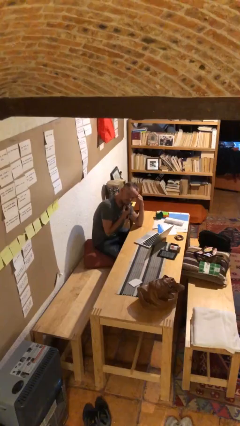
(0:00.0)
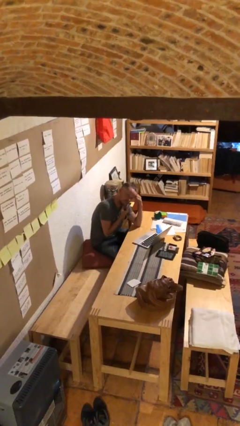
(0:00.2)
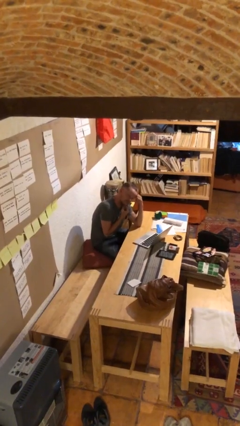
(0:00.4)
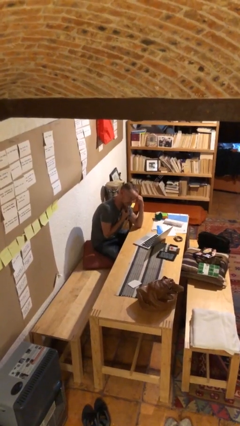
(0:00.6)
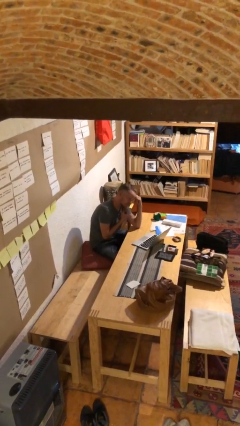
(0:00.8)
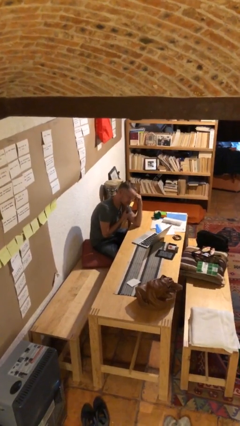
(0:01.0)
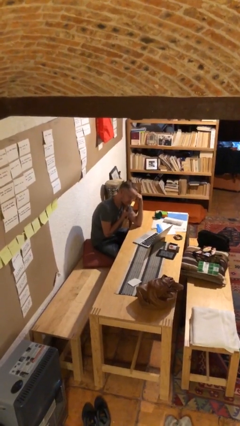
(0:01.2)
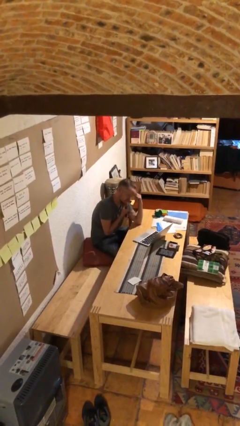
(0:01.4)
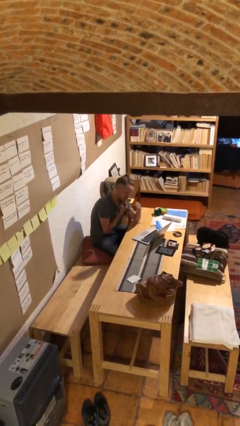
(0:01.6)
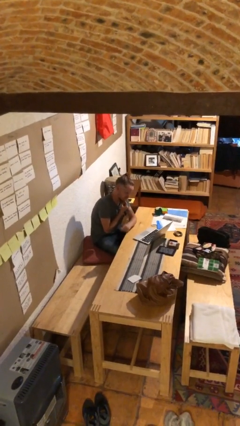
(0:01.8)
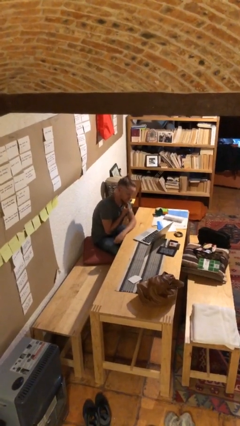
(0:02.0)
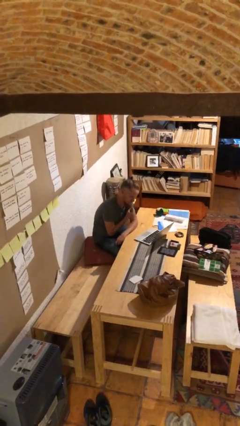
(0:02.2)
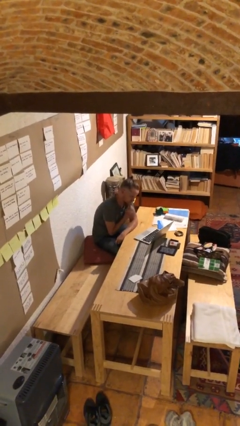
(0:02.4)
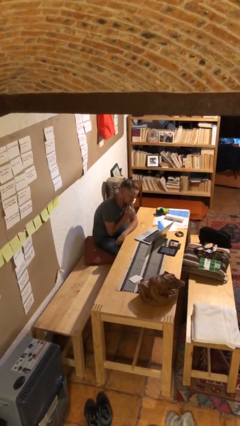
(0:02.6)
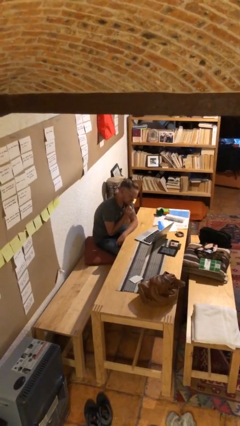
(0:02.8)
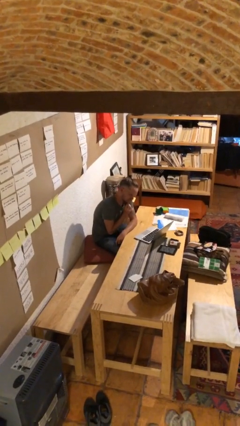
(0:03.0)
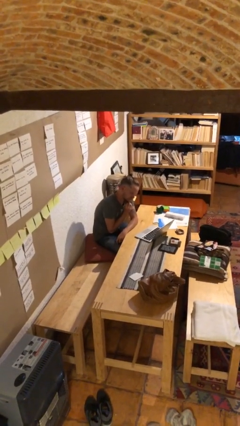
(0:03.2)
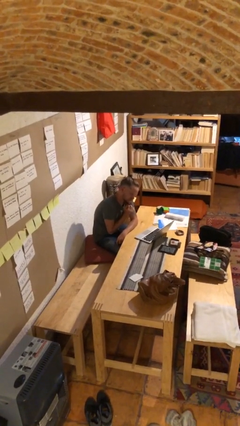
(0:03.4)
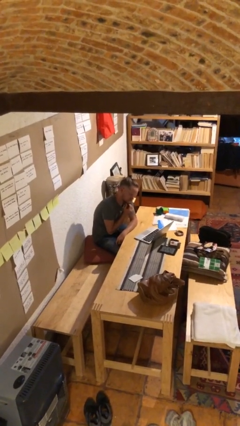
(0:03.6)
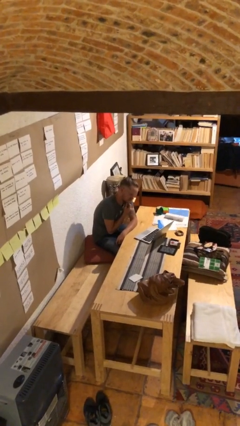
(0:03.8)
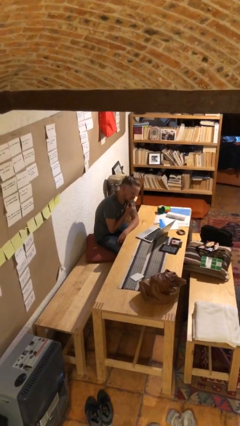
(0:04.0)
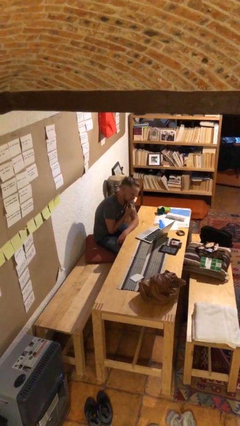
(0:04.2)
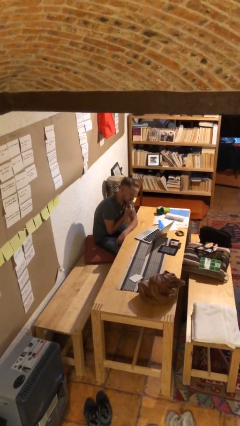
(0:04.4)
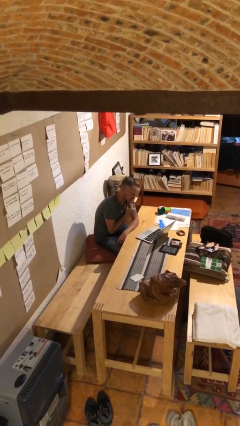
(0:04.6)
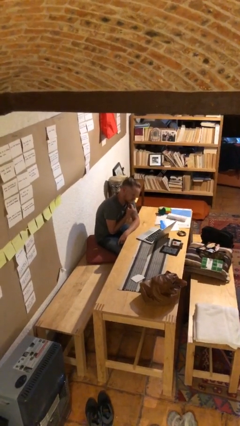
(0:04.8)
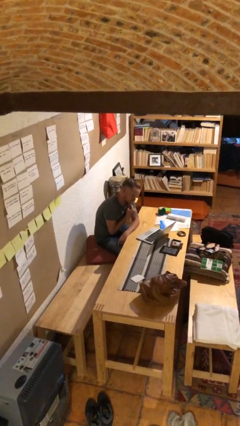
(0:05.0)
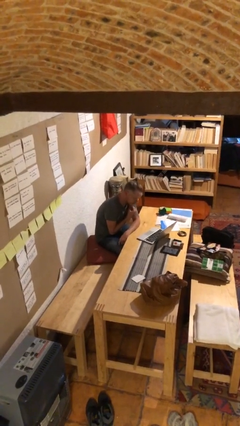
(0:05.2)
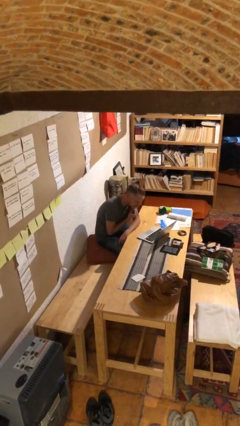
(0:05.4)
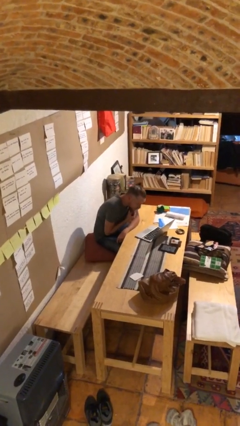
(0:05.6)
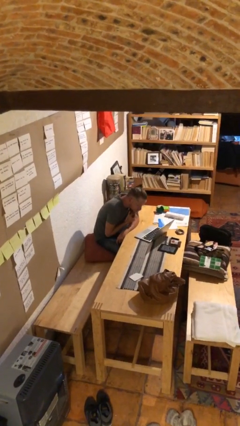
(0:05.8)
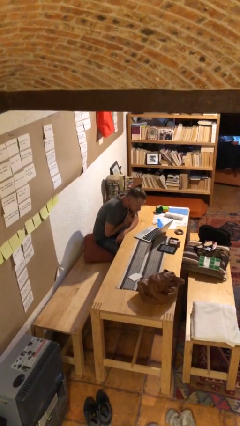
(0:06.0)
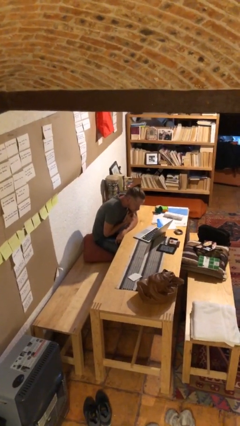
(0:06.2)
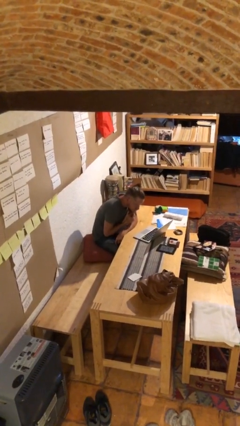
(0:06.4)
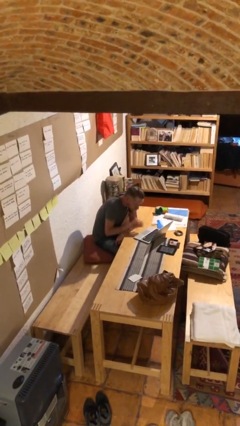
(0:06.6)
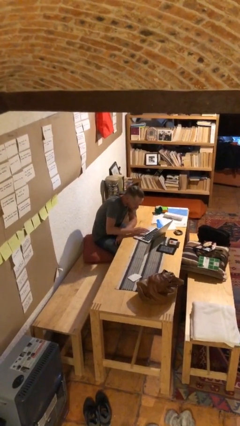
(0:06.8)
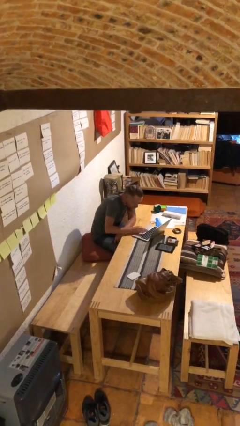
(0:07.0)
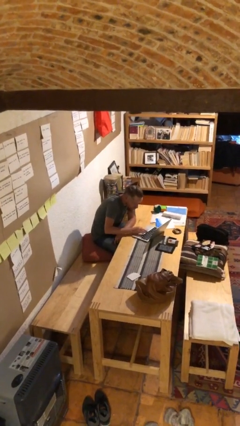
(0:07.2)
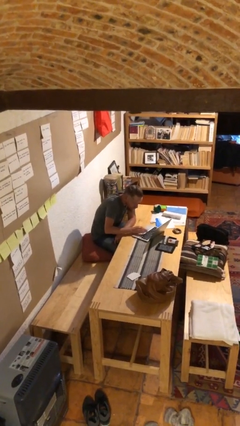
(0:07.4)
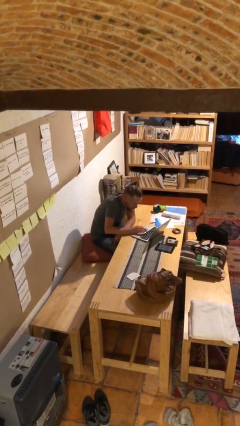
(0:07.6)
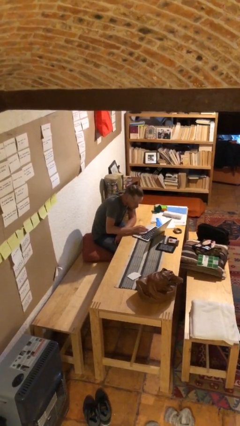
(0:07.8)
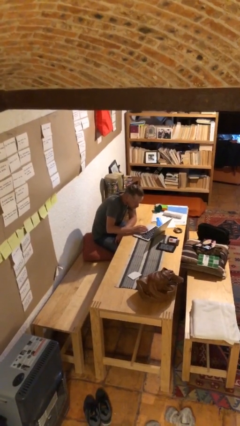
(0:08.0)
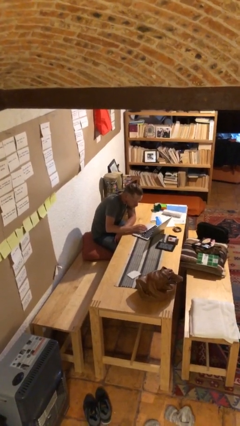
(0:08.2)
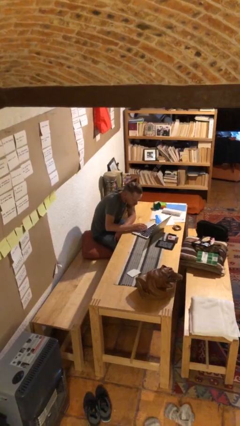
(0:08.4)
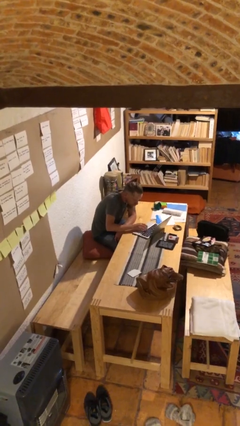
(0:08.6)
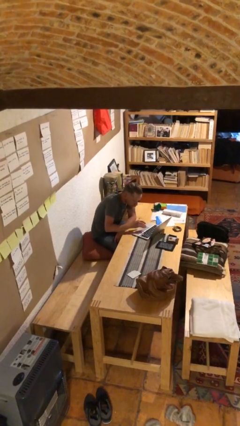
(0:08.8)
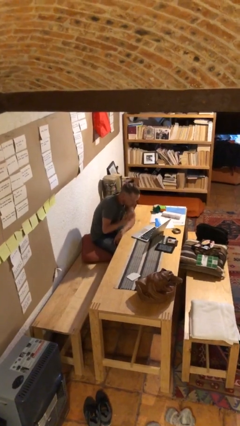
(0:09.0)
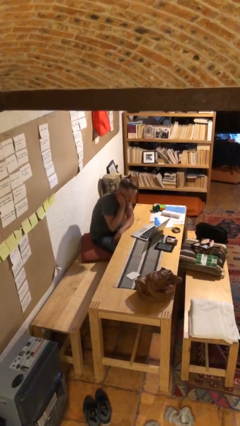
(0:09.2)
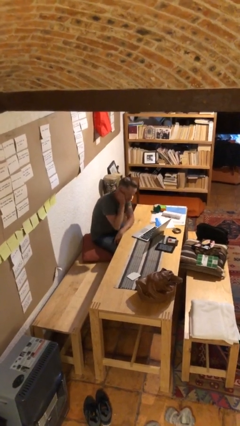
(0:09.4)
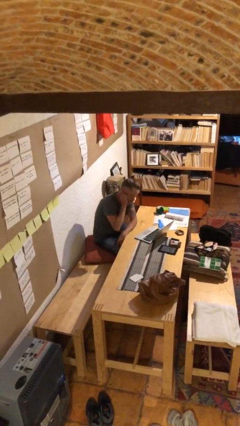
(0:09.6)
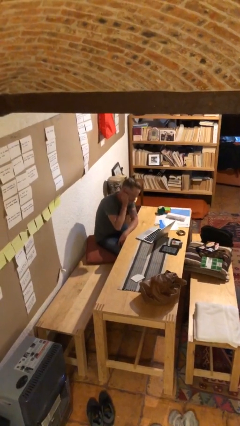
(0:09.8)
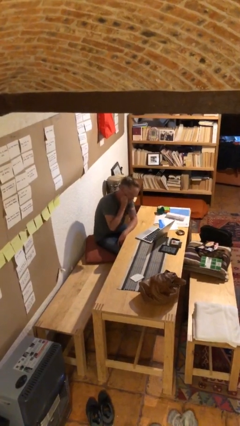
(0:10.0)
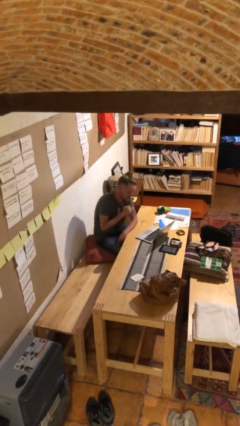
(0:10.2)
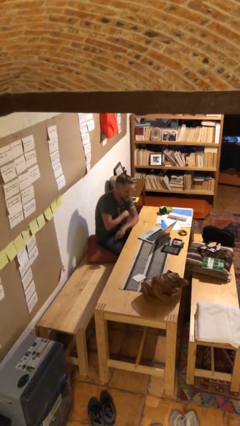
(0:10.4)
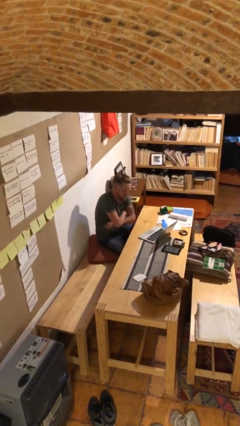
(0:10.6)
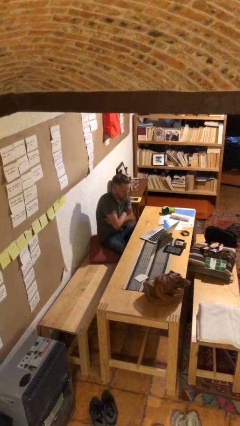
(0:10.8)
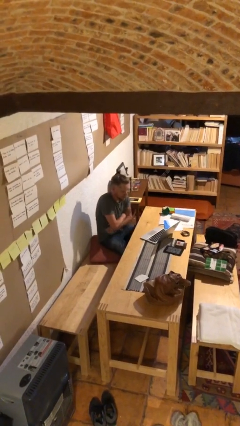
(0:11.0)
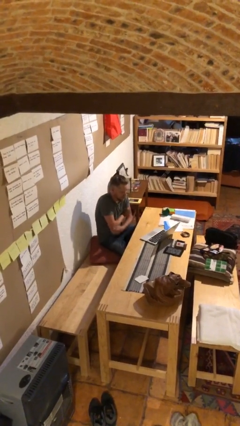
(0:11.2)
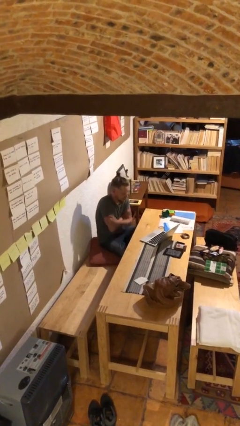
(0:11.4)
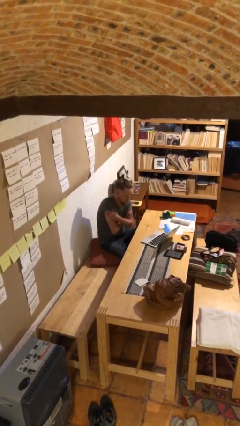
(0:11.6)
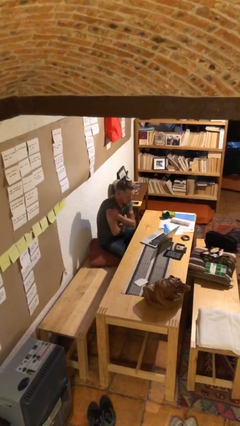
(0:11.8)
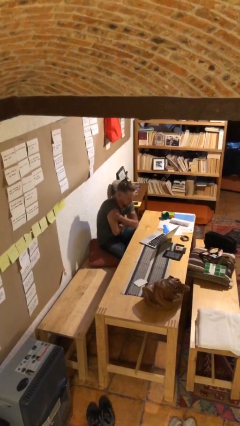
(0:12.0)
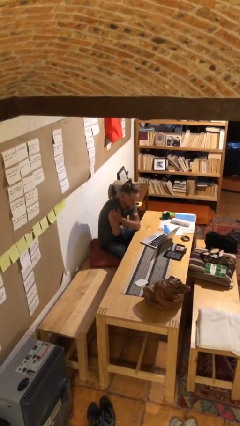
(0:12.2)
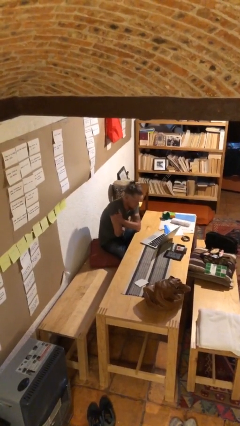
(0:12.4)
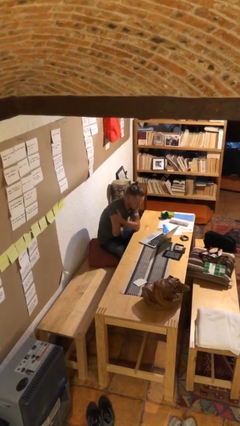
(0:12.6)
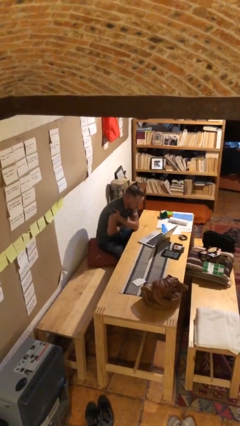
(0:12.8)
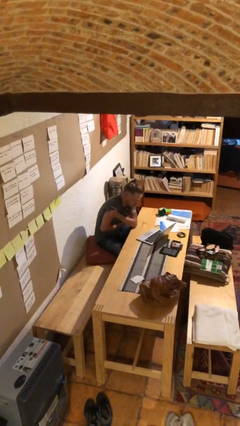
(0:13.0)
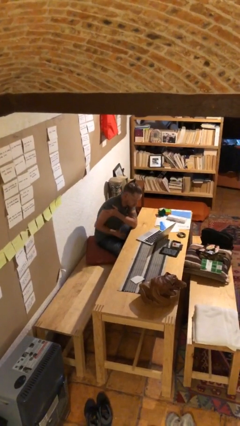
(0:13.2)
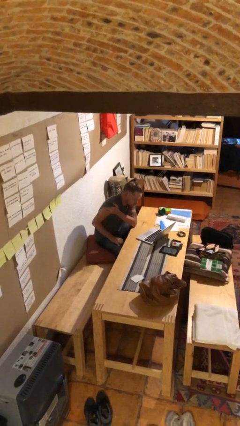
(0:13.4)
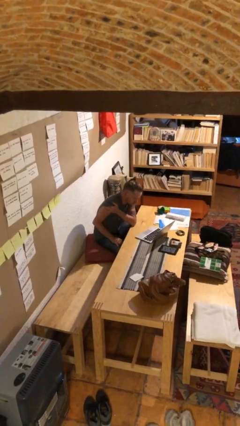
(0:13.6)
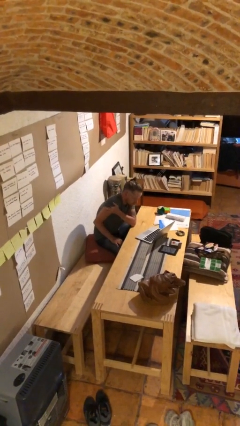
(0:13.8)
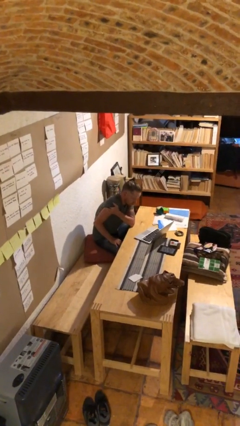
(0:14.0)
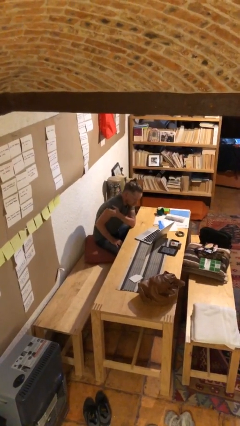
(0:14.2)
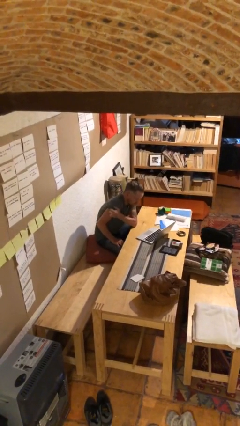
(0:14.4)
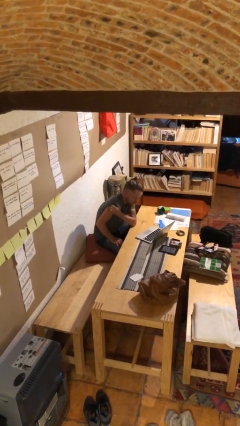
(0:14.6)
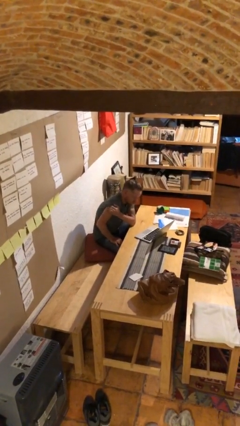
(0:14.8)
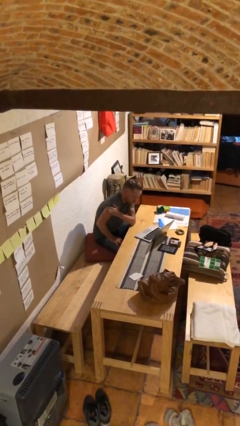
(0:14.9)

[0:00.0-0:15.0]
person interacts with laptop

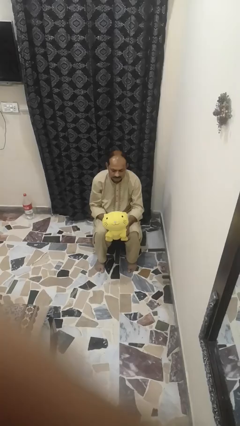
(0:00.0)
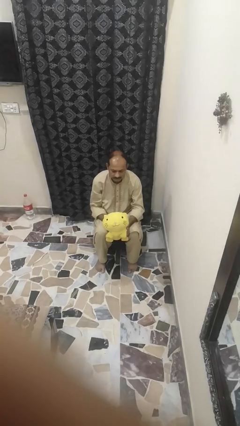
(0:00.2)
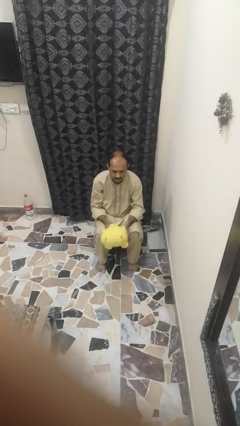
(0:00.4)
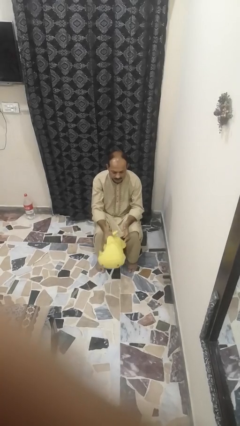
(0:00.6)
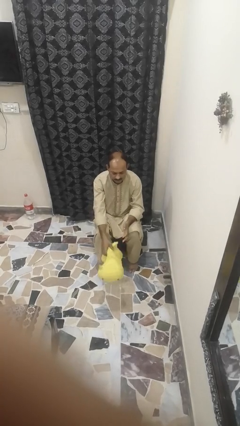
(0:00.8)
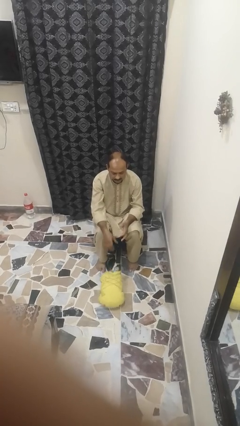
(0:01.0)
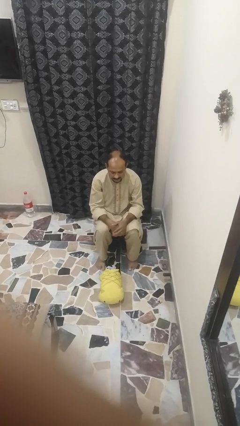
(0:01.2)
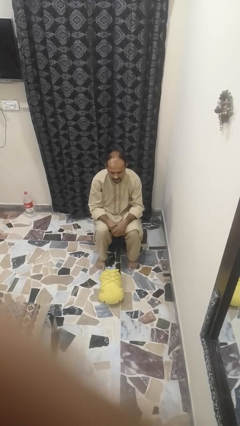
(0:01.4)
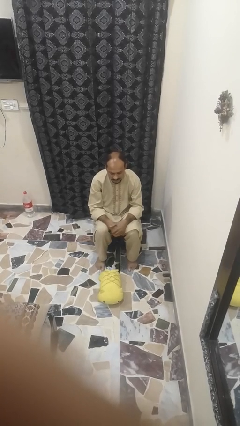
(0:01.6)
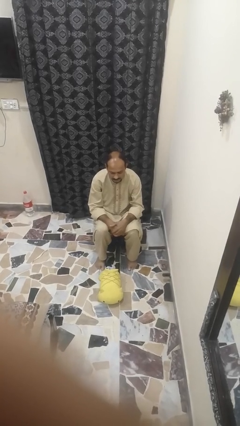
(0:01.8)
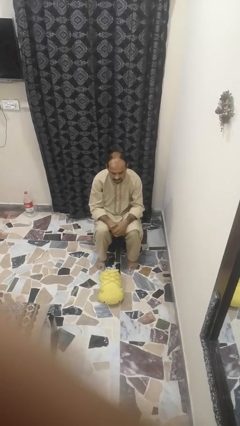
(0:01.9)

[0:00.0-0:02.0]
person drops object

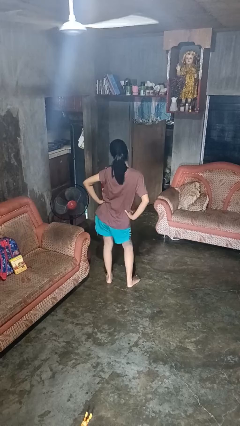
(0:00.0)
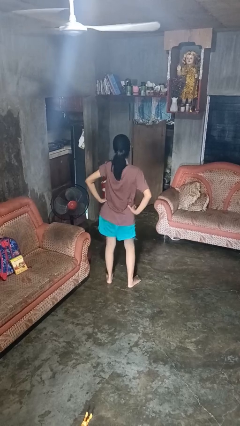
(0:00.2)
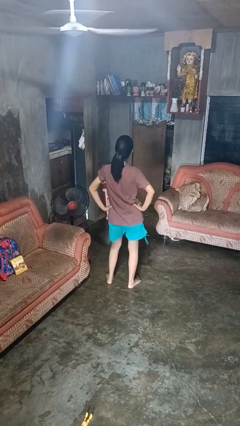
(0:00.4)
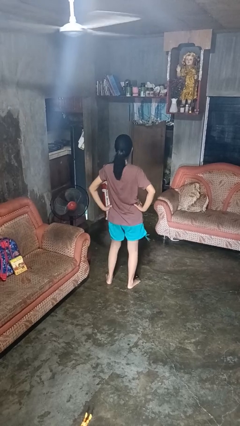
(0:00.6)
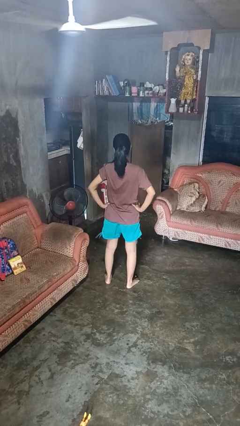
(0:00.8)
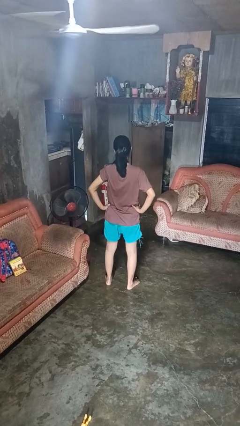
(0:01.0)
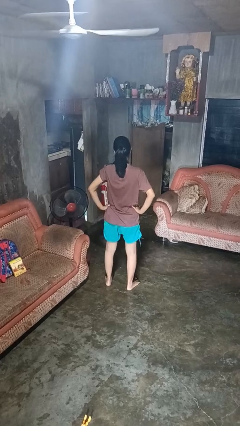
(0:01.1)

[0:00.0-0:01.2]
person dances in place

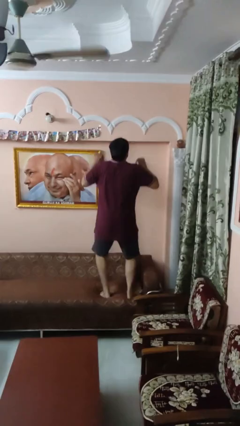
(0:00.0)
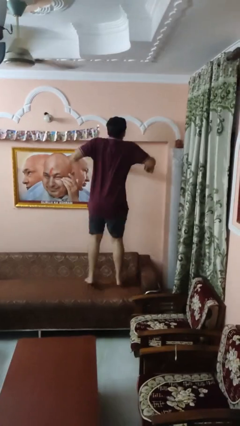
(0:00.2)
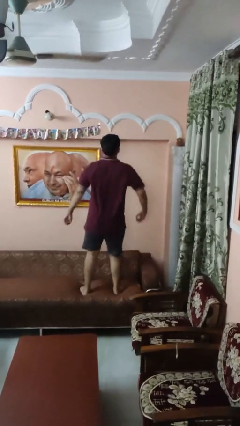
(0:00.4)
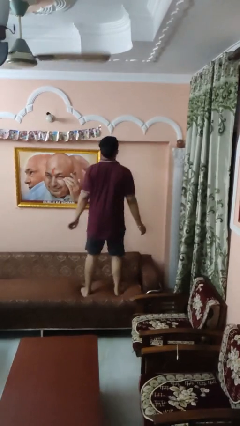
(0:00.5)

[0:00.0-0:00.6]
person jumps on couch
